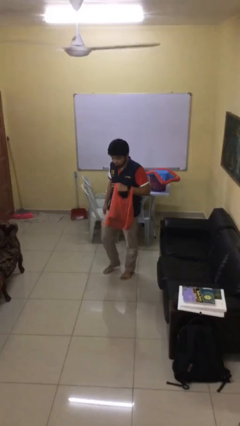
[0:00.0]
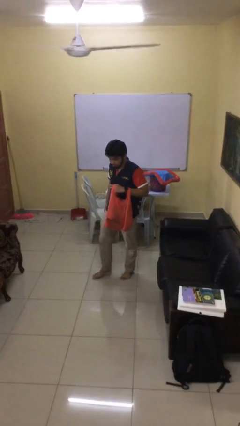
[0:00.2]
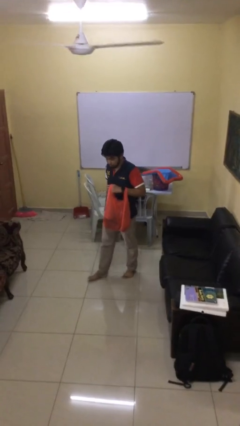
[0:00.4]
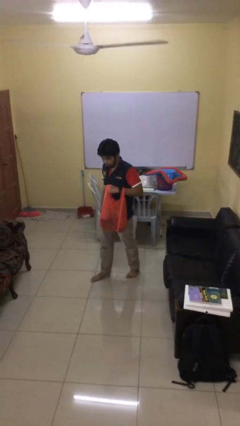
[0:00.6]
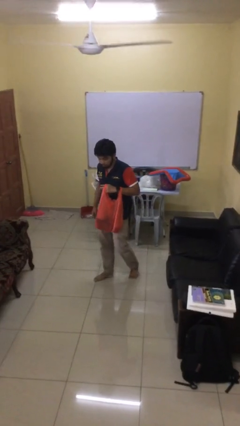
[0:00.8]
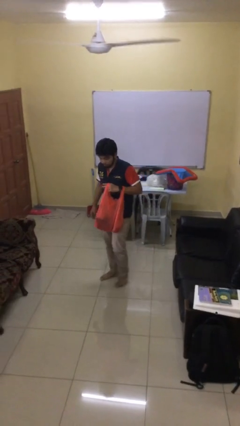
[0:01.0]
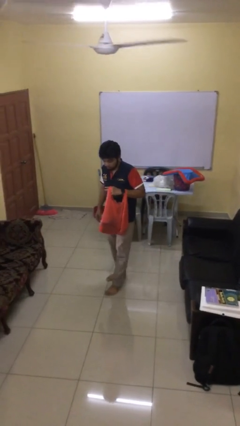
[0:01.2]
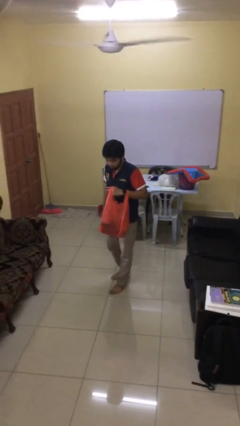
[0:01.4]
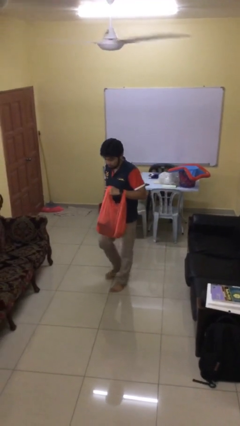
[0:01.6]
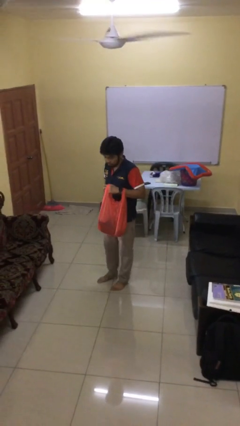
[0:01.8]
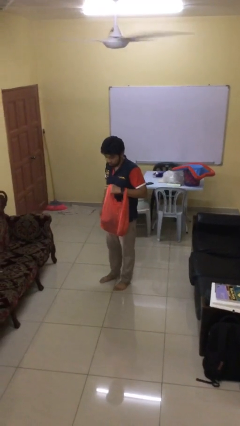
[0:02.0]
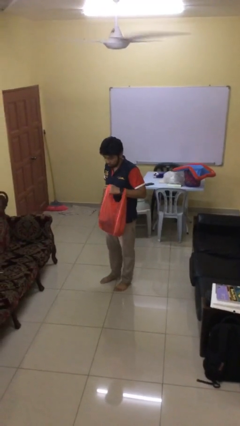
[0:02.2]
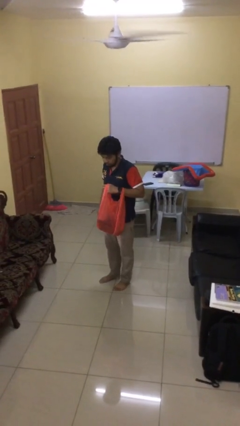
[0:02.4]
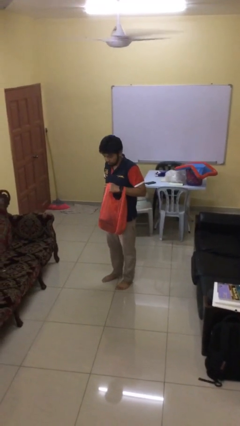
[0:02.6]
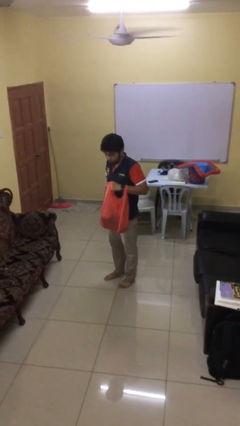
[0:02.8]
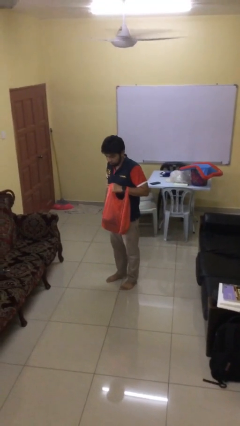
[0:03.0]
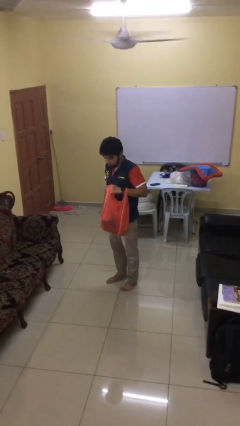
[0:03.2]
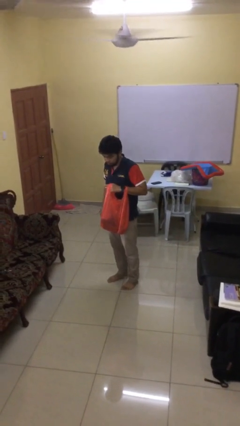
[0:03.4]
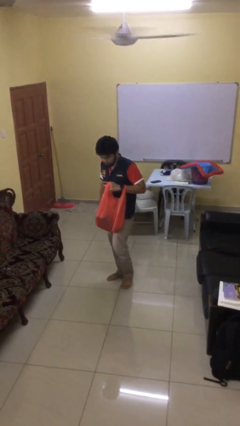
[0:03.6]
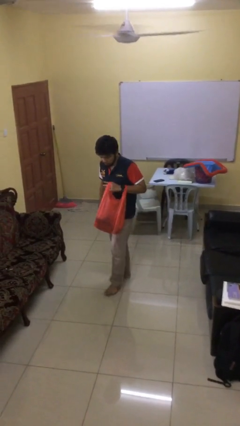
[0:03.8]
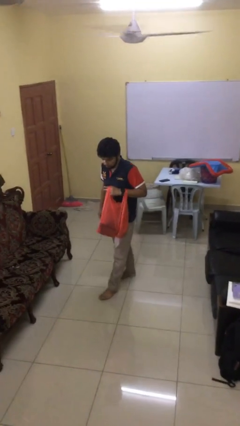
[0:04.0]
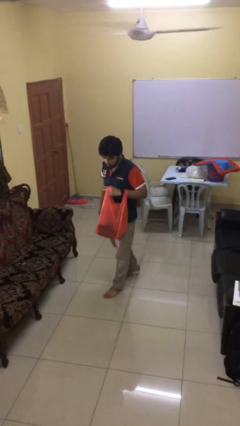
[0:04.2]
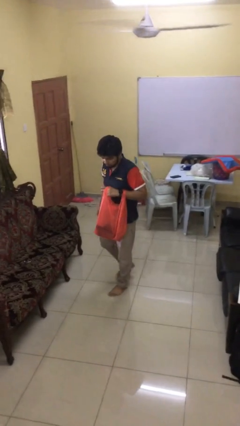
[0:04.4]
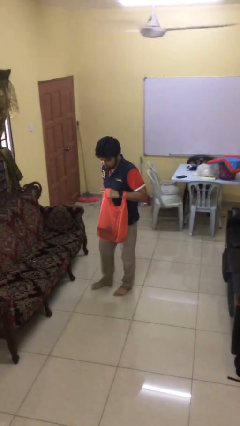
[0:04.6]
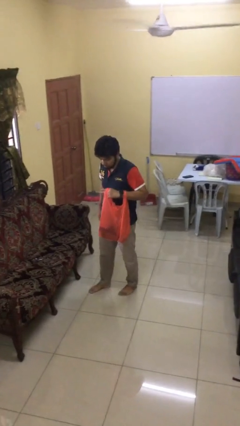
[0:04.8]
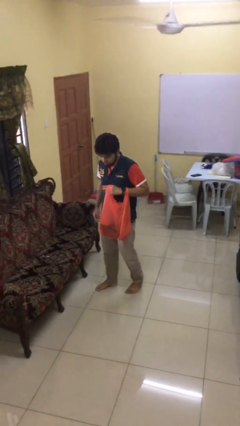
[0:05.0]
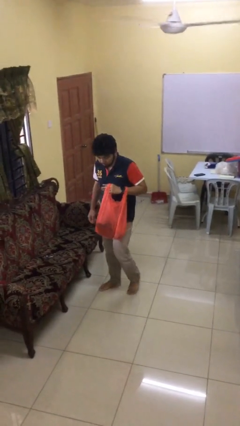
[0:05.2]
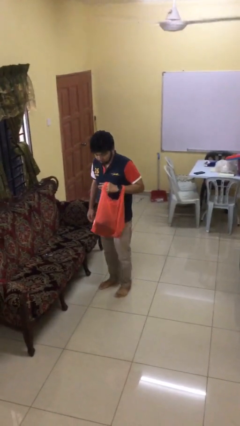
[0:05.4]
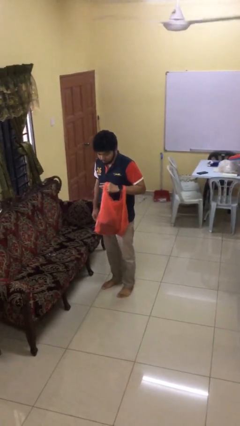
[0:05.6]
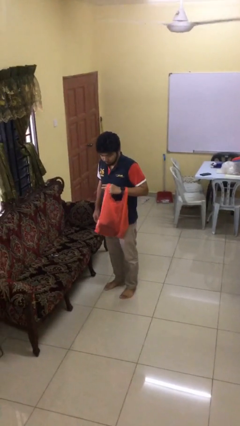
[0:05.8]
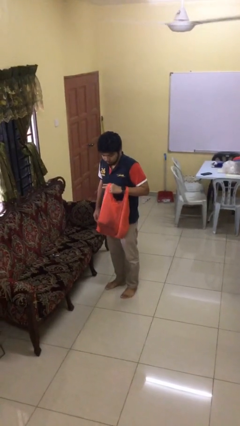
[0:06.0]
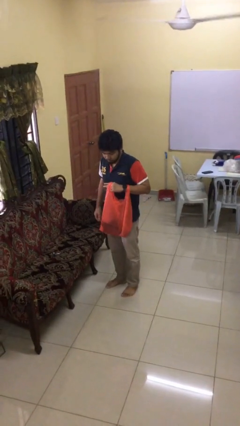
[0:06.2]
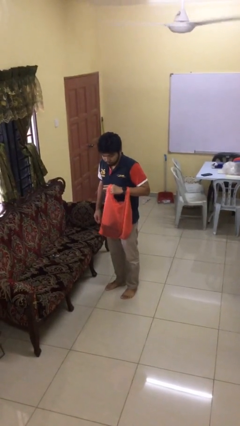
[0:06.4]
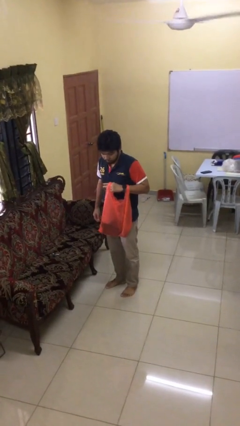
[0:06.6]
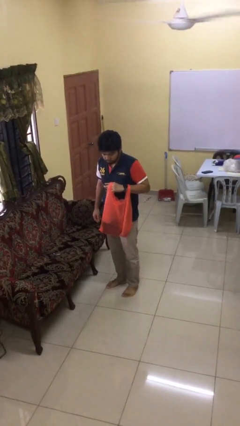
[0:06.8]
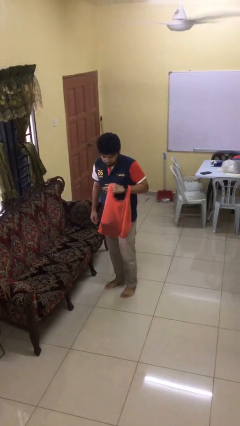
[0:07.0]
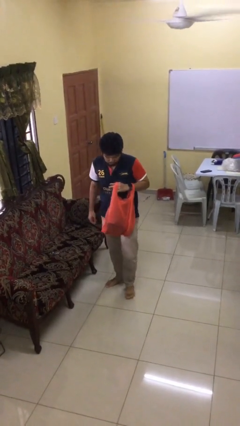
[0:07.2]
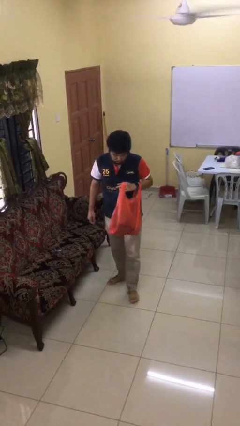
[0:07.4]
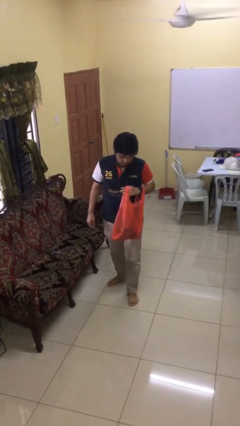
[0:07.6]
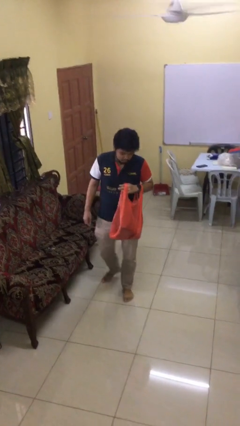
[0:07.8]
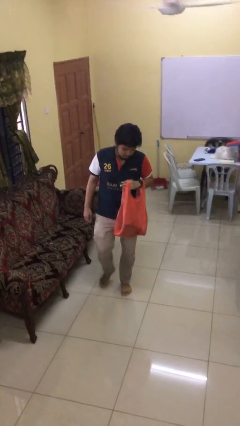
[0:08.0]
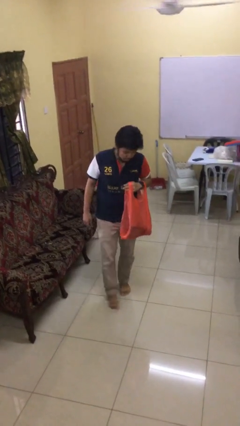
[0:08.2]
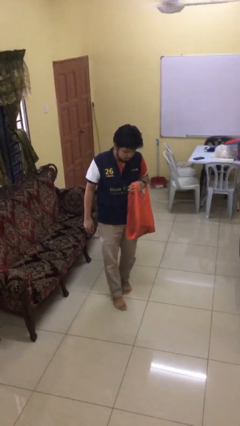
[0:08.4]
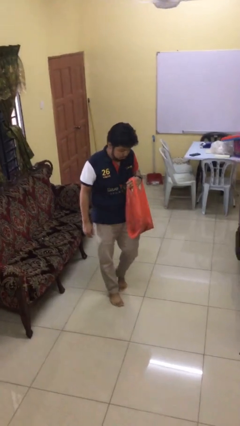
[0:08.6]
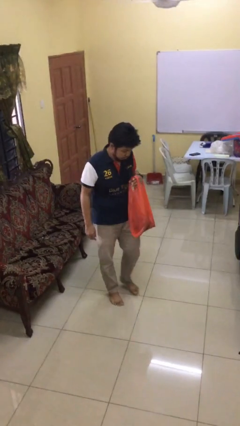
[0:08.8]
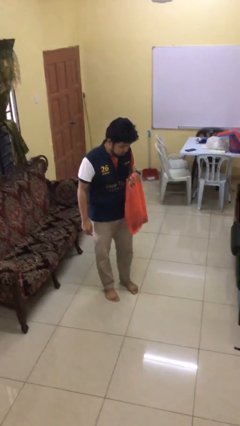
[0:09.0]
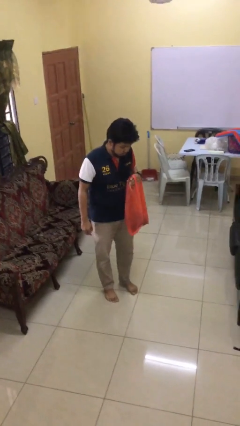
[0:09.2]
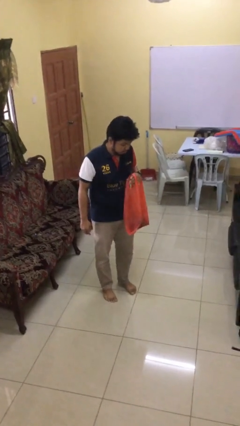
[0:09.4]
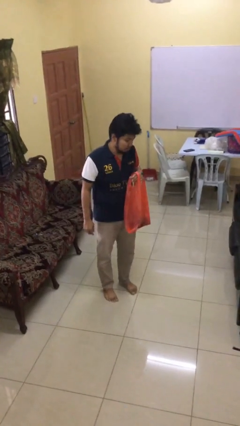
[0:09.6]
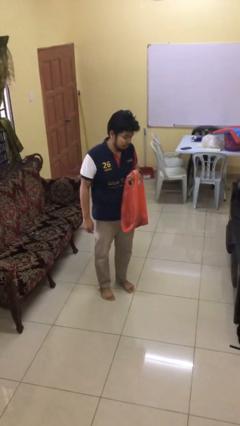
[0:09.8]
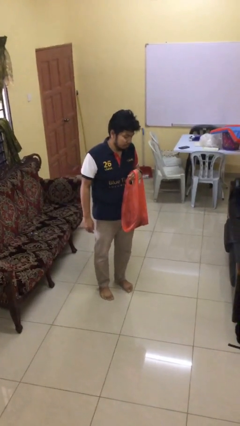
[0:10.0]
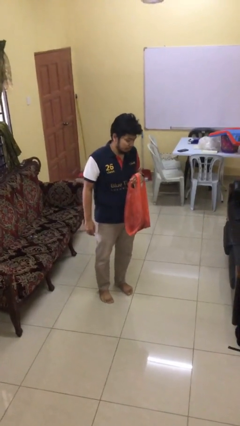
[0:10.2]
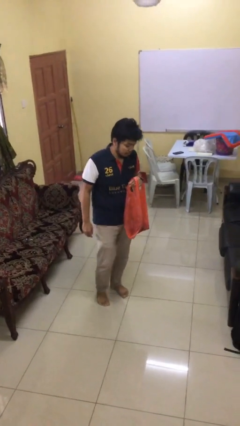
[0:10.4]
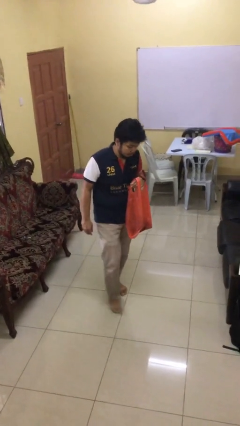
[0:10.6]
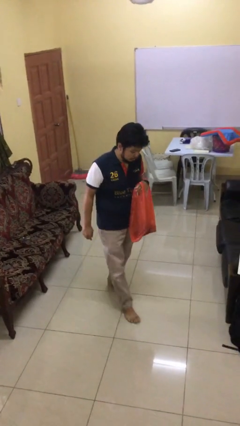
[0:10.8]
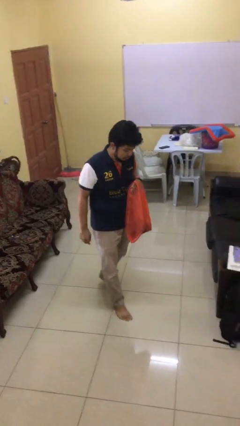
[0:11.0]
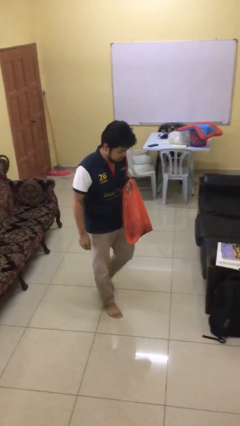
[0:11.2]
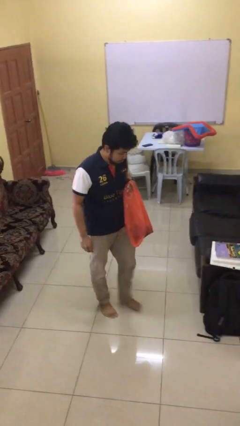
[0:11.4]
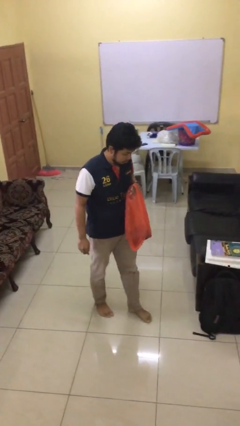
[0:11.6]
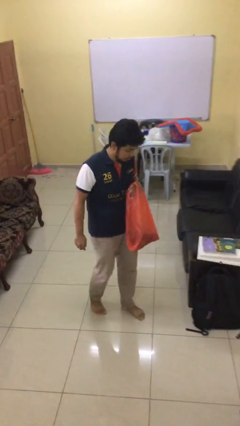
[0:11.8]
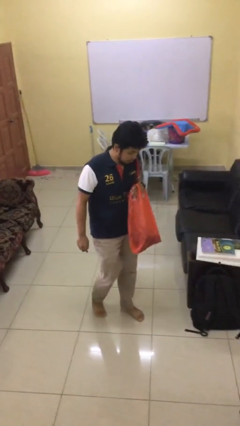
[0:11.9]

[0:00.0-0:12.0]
person carries groceries

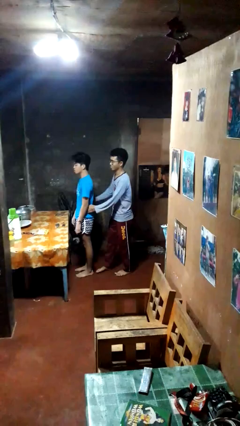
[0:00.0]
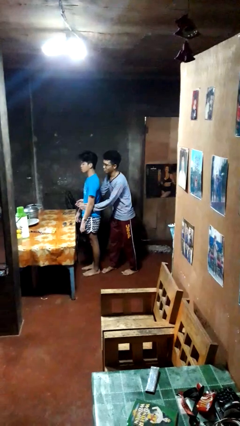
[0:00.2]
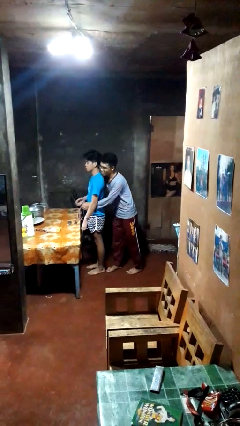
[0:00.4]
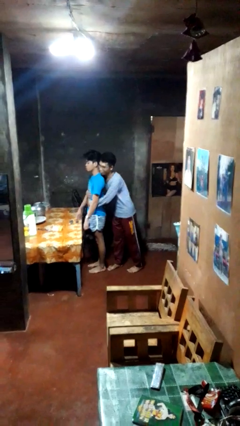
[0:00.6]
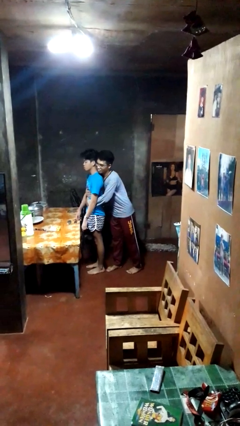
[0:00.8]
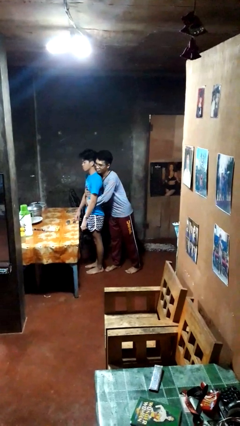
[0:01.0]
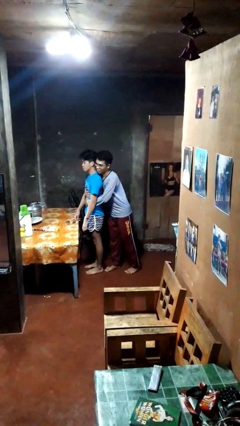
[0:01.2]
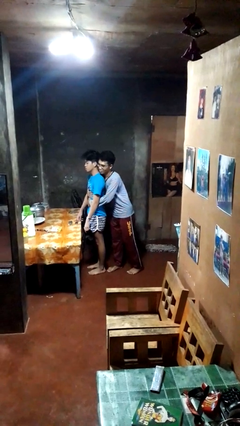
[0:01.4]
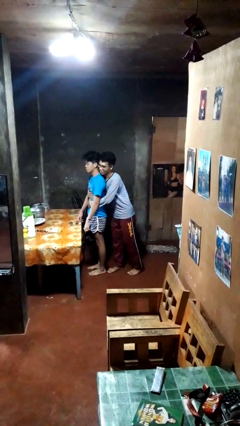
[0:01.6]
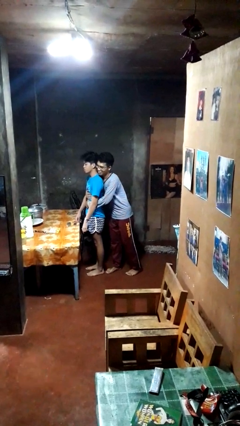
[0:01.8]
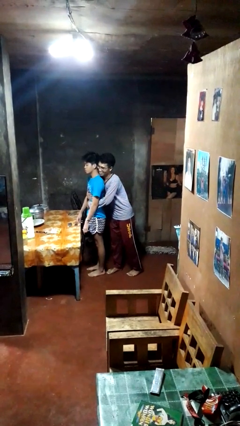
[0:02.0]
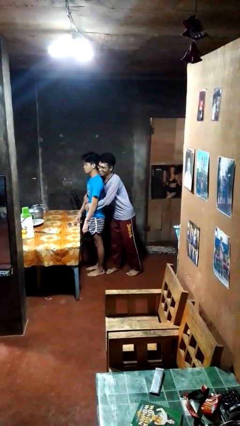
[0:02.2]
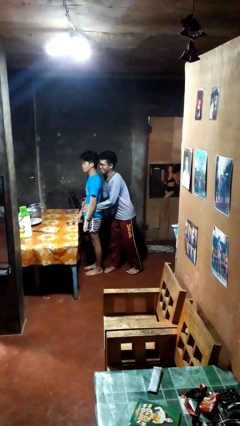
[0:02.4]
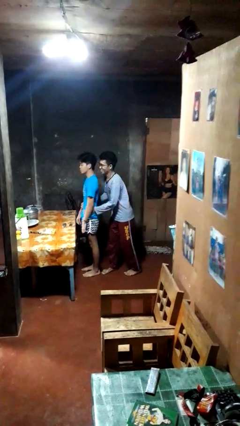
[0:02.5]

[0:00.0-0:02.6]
person hugs person from behind

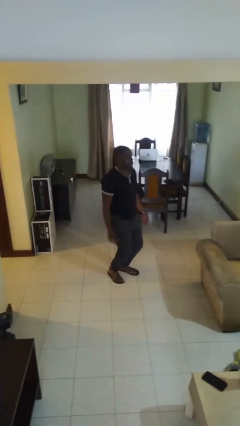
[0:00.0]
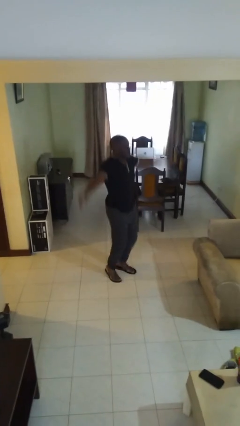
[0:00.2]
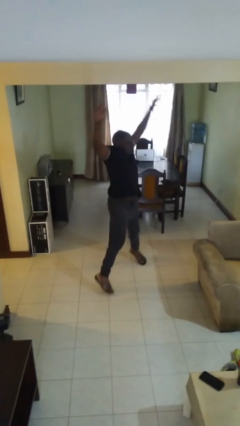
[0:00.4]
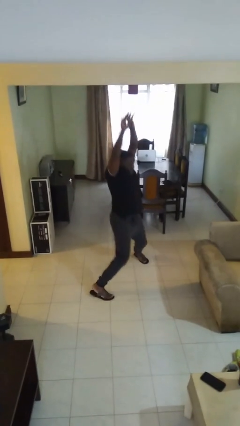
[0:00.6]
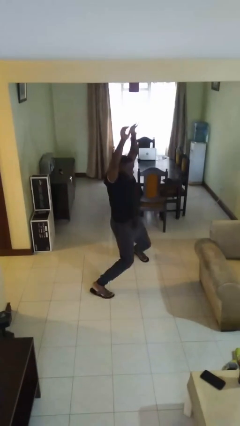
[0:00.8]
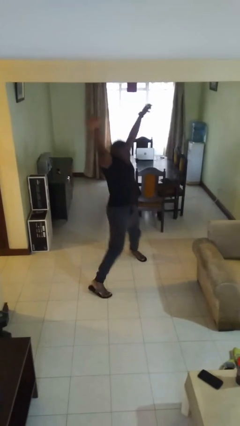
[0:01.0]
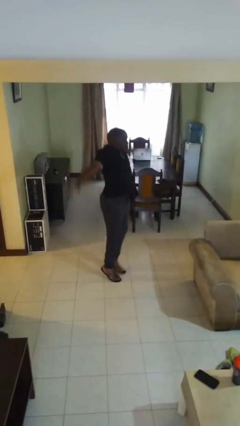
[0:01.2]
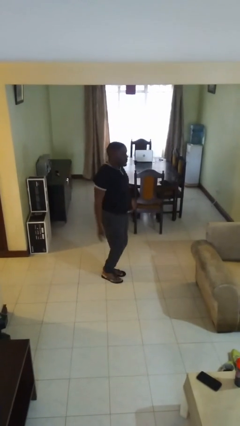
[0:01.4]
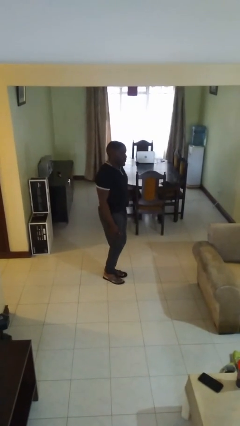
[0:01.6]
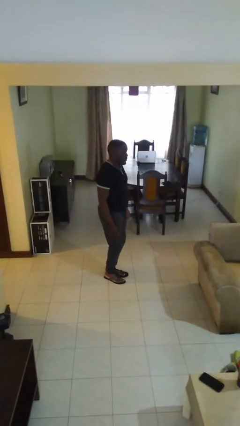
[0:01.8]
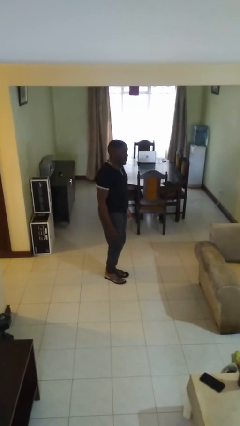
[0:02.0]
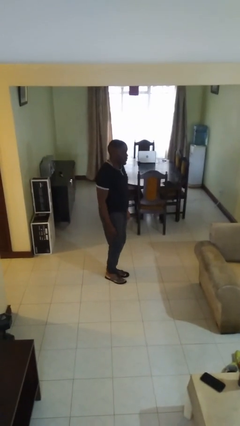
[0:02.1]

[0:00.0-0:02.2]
person exercises with jumping jacks

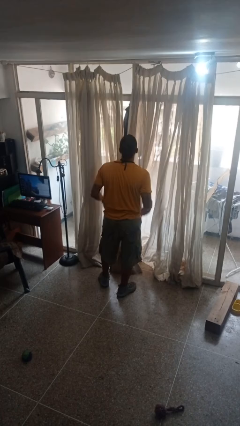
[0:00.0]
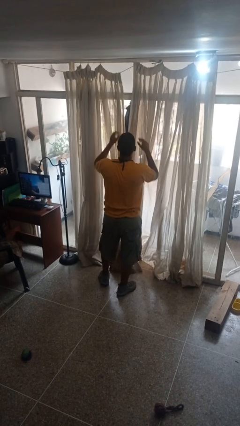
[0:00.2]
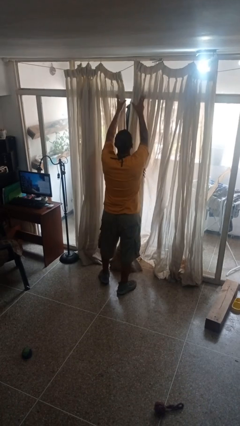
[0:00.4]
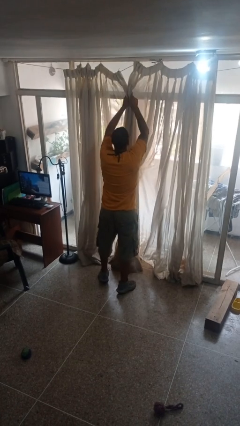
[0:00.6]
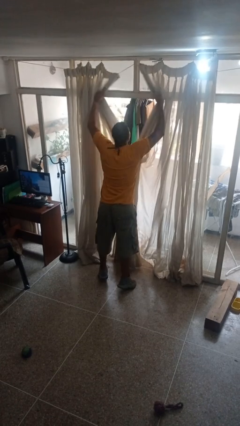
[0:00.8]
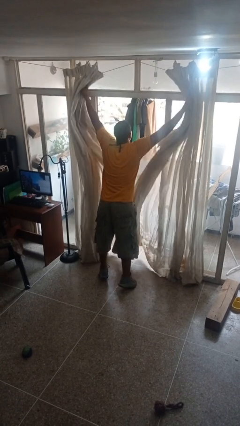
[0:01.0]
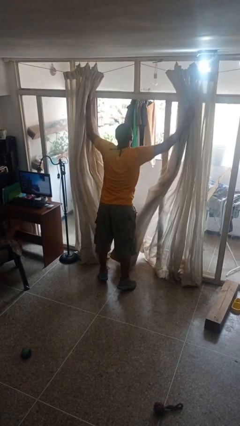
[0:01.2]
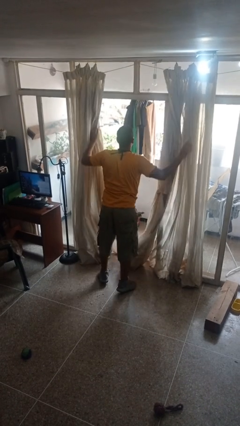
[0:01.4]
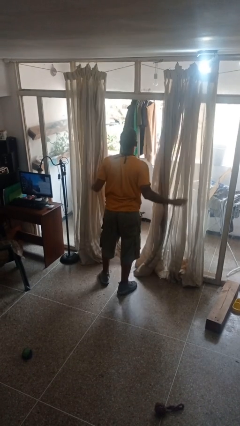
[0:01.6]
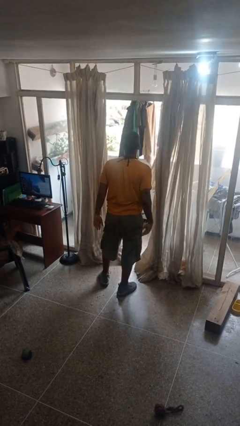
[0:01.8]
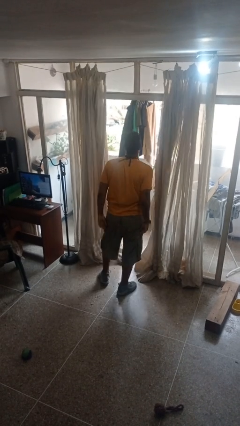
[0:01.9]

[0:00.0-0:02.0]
person opens curtains
